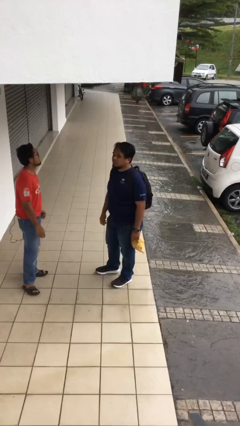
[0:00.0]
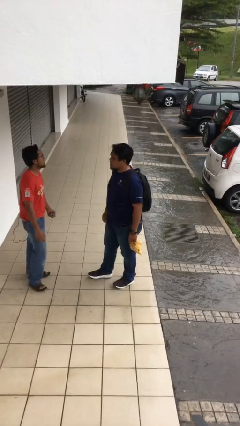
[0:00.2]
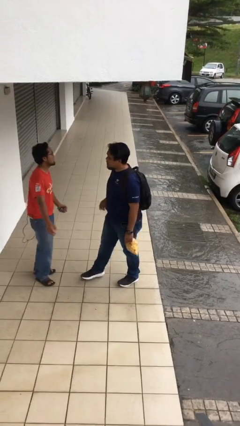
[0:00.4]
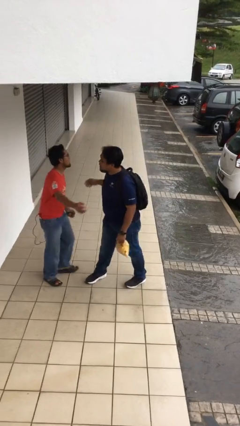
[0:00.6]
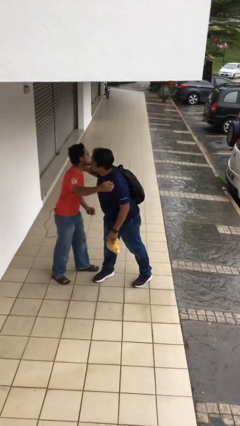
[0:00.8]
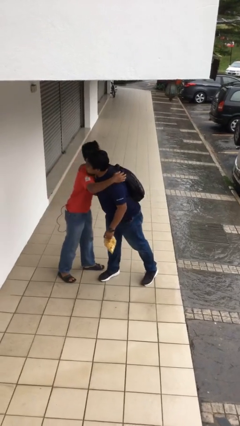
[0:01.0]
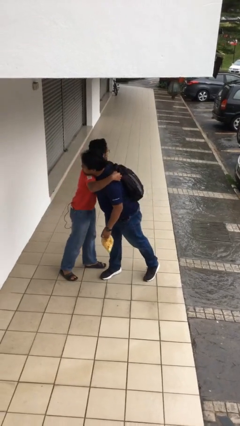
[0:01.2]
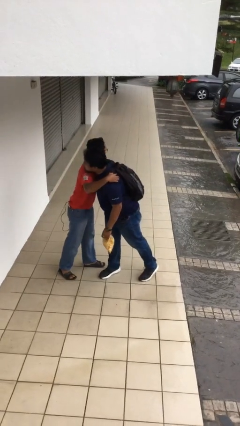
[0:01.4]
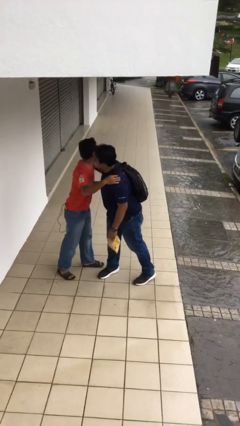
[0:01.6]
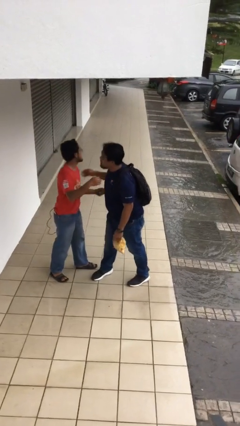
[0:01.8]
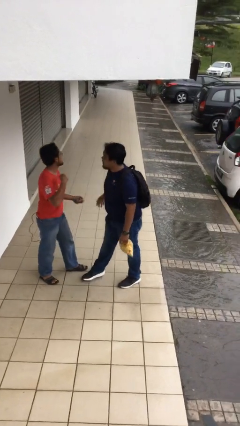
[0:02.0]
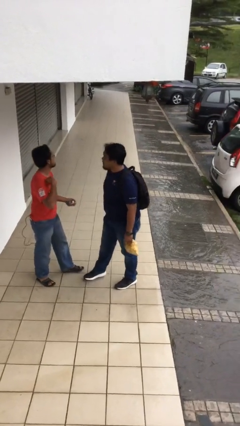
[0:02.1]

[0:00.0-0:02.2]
person embraces person

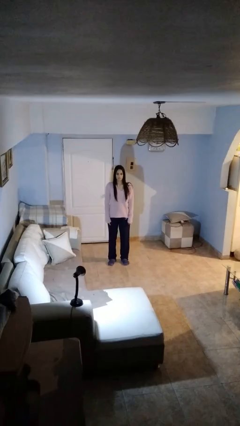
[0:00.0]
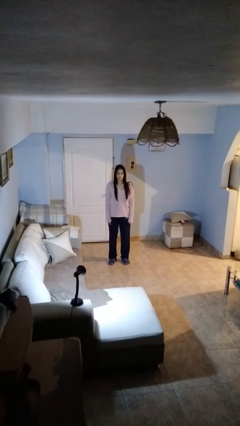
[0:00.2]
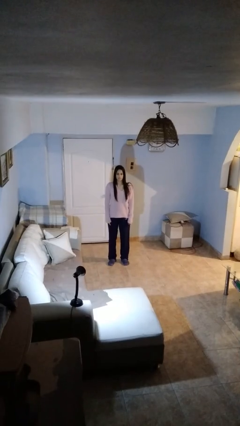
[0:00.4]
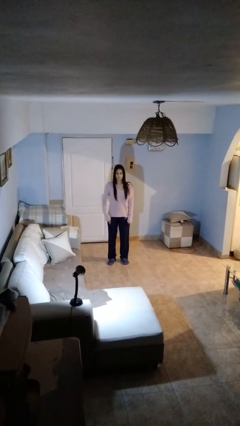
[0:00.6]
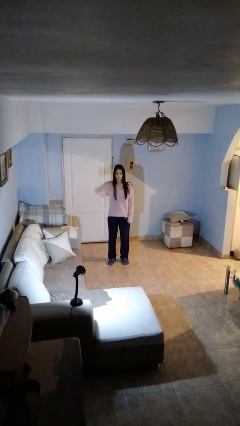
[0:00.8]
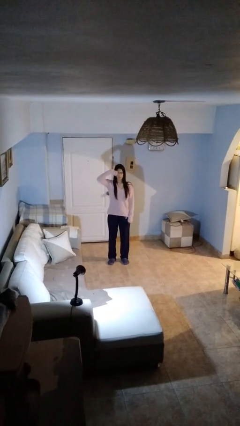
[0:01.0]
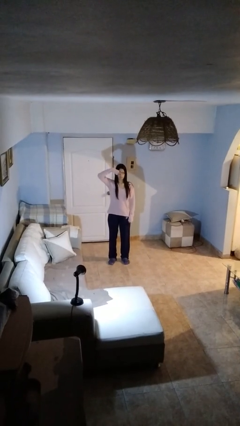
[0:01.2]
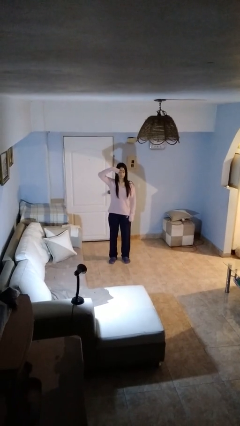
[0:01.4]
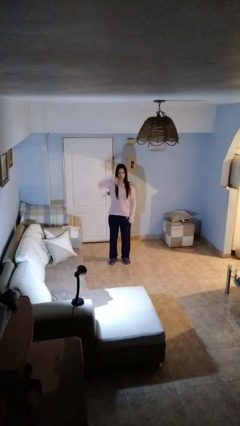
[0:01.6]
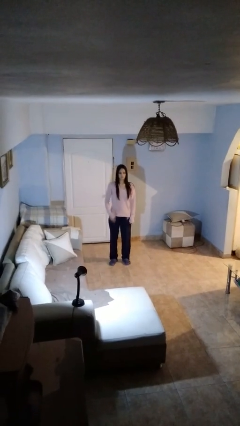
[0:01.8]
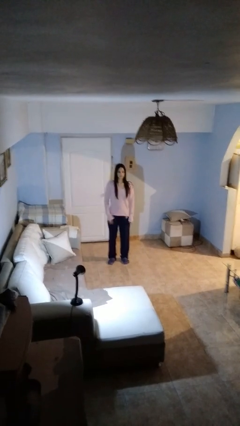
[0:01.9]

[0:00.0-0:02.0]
person salutes

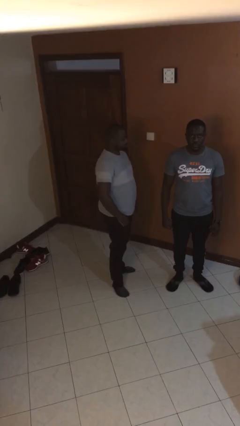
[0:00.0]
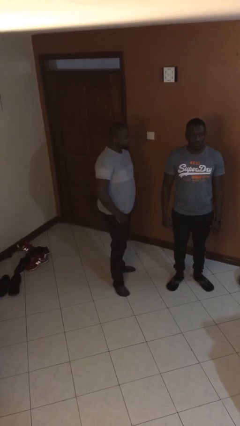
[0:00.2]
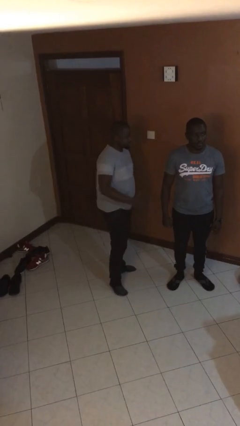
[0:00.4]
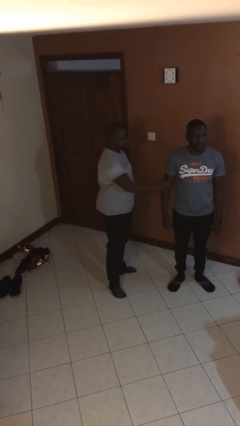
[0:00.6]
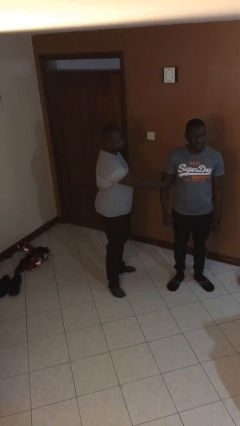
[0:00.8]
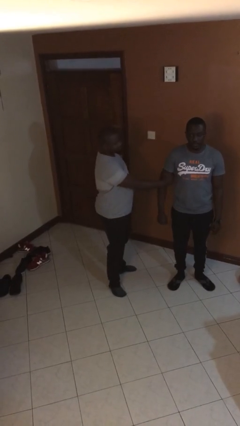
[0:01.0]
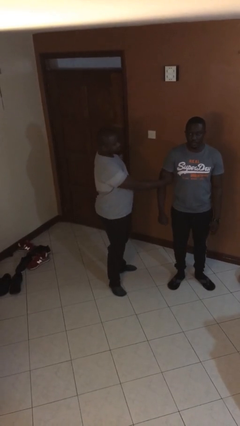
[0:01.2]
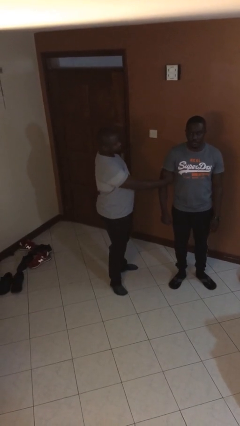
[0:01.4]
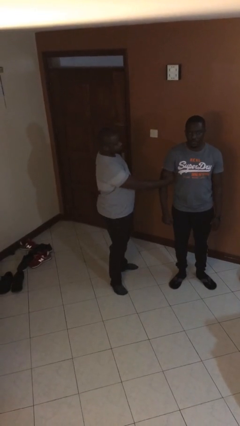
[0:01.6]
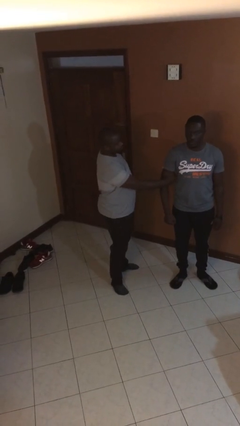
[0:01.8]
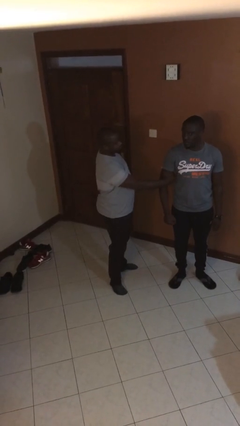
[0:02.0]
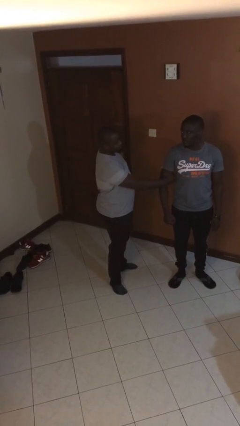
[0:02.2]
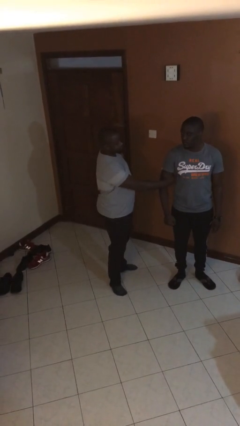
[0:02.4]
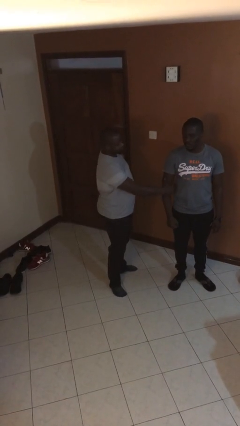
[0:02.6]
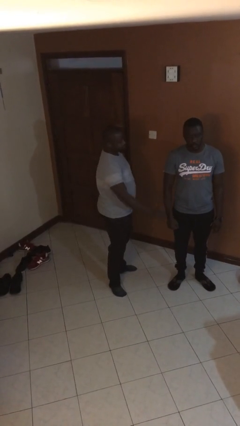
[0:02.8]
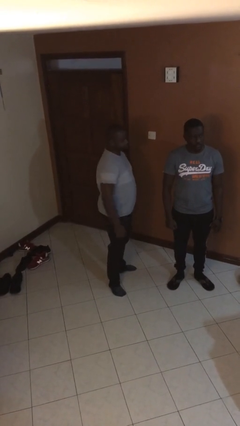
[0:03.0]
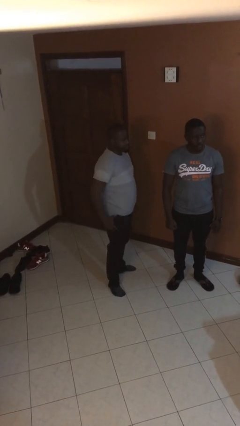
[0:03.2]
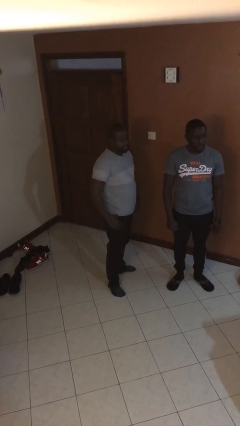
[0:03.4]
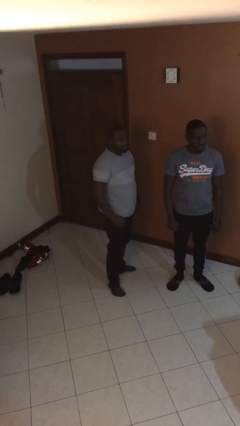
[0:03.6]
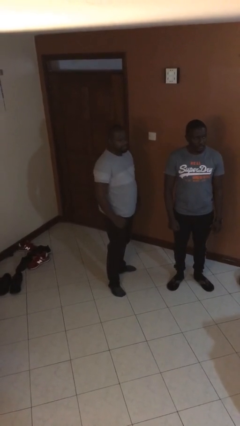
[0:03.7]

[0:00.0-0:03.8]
person grabs person by bicep

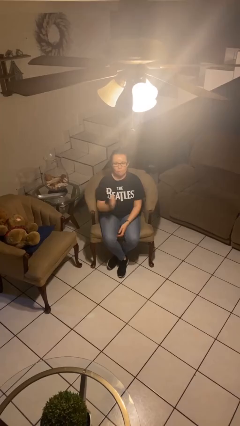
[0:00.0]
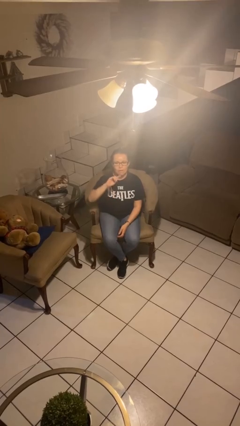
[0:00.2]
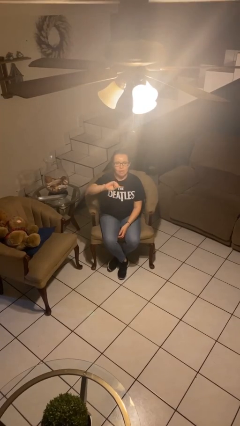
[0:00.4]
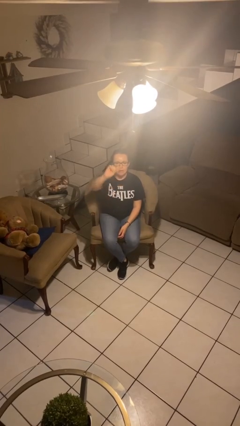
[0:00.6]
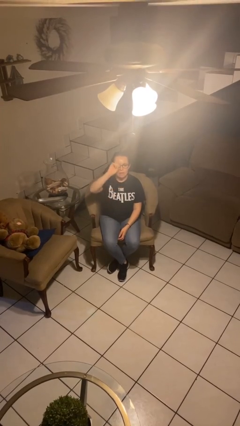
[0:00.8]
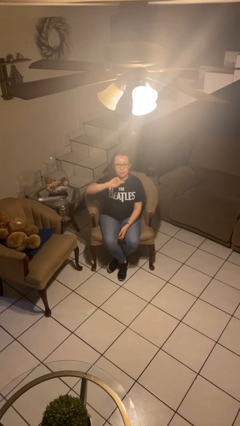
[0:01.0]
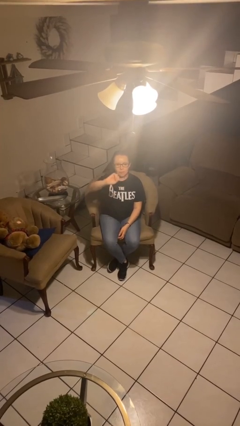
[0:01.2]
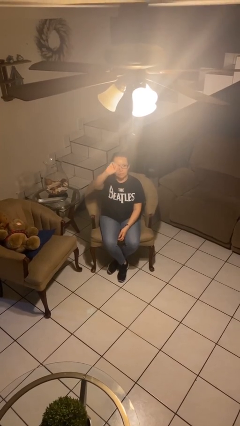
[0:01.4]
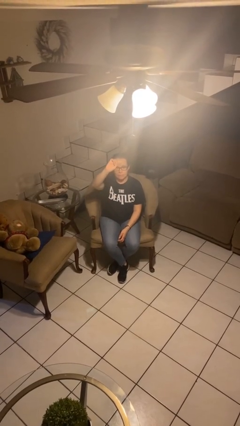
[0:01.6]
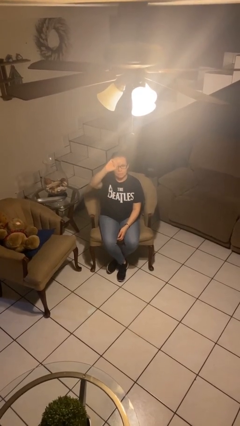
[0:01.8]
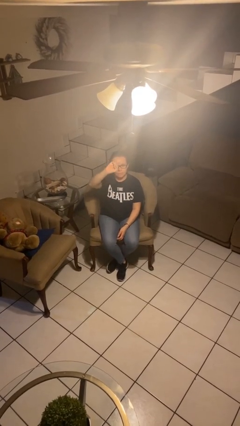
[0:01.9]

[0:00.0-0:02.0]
person gestures swipe up

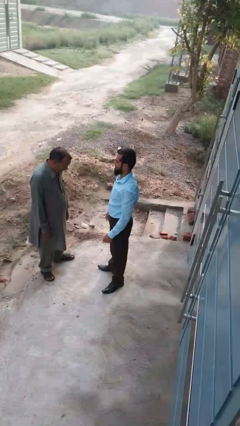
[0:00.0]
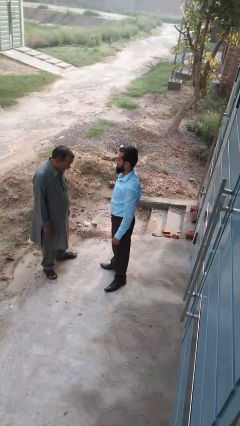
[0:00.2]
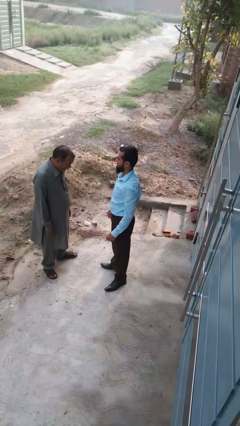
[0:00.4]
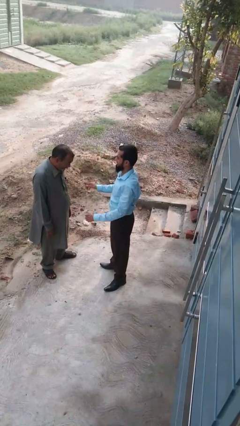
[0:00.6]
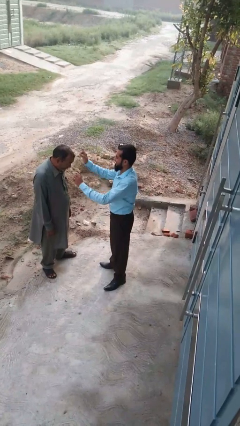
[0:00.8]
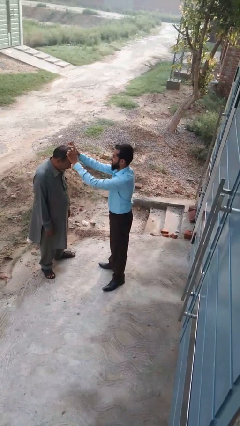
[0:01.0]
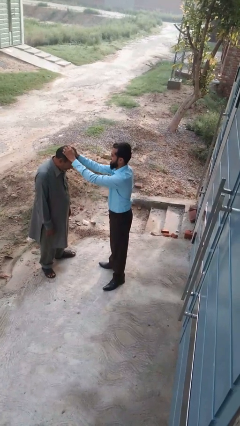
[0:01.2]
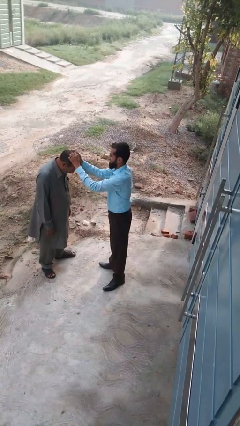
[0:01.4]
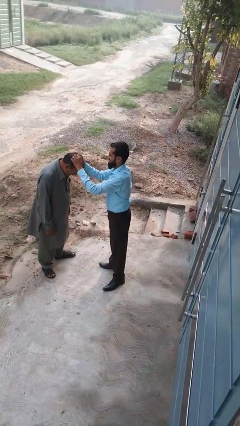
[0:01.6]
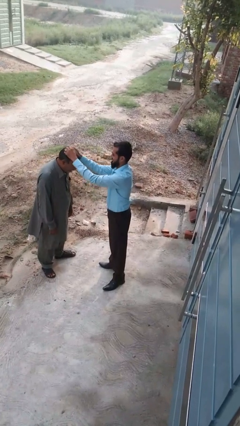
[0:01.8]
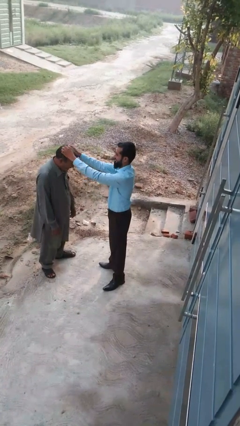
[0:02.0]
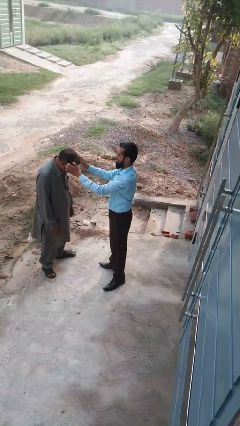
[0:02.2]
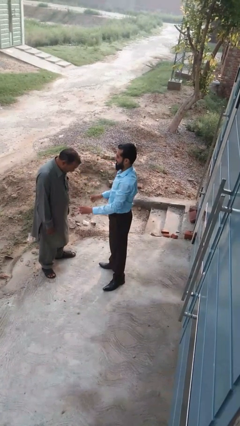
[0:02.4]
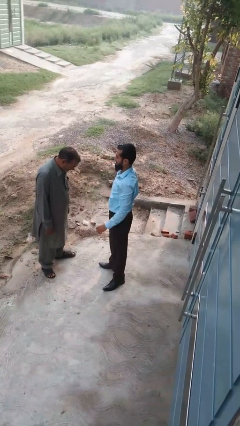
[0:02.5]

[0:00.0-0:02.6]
person grabs person by hair

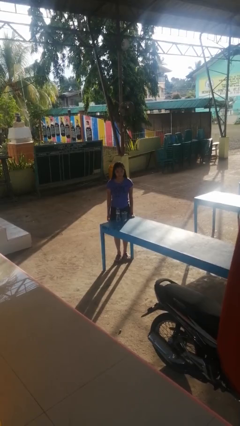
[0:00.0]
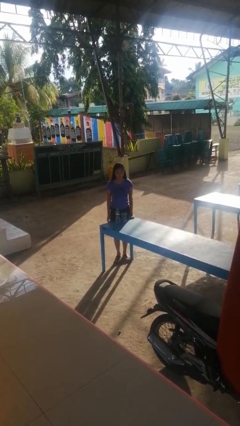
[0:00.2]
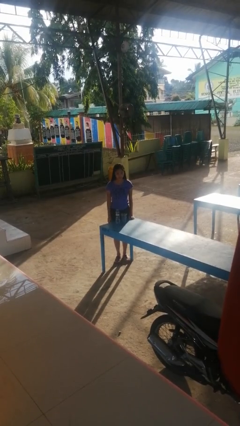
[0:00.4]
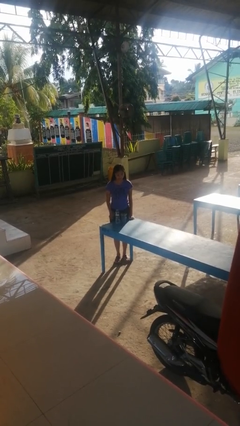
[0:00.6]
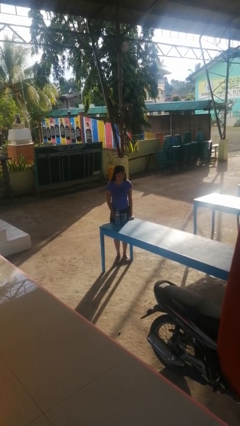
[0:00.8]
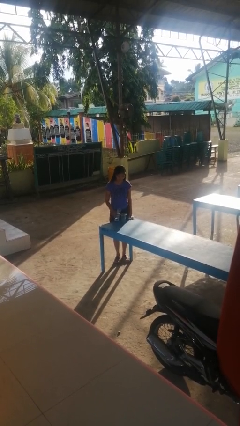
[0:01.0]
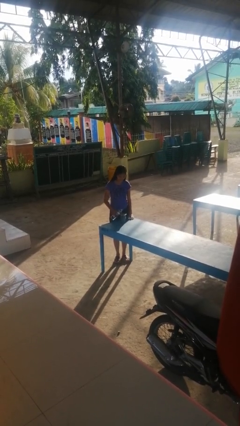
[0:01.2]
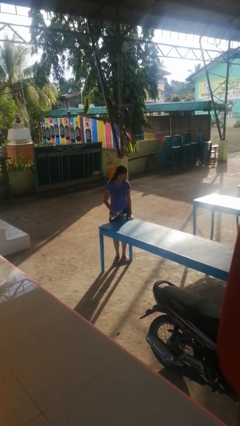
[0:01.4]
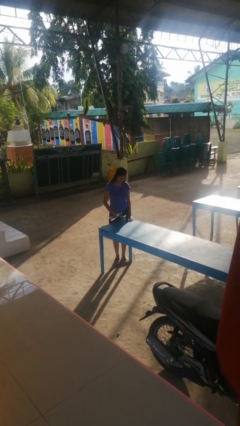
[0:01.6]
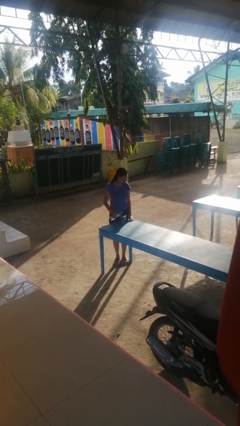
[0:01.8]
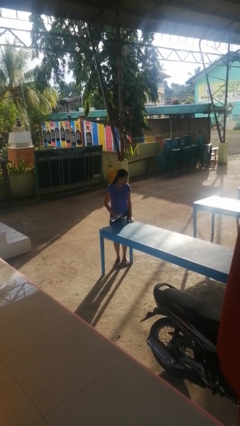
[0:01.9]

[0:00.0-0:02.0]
person pours liquid into cup

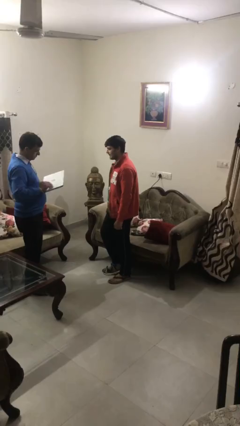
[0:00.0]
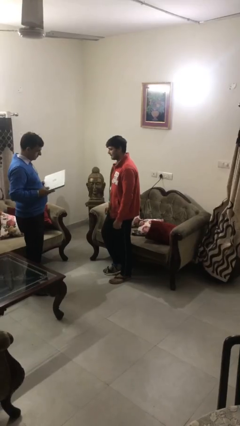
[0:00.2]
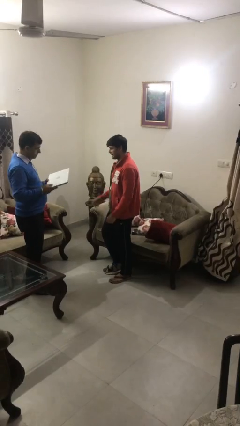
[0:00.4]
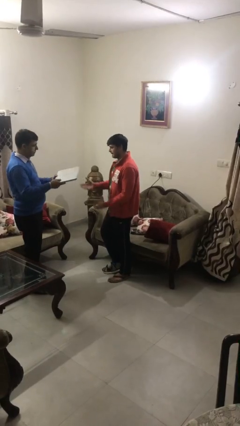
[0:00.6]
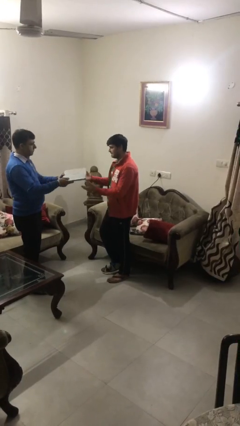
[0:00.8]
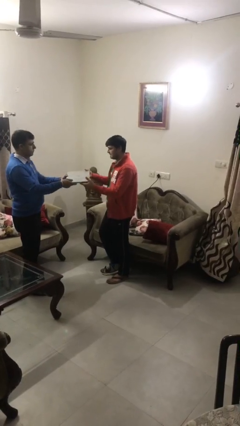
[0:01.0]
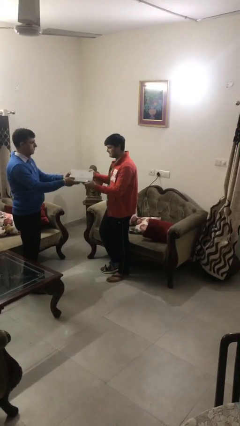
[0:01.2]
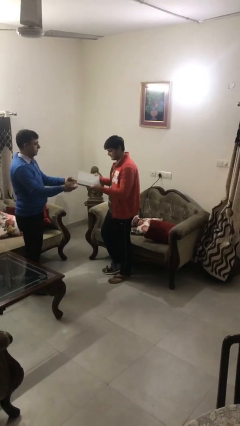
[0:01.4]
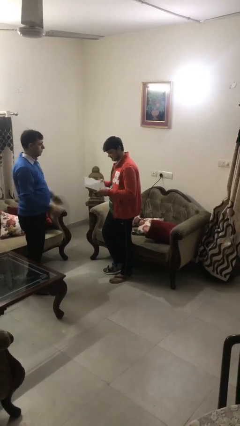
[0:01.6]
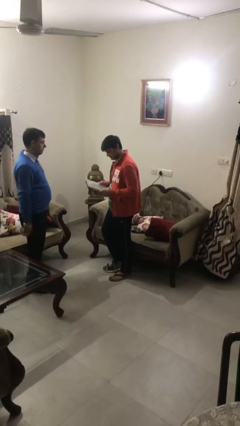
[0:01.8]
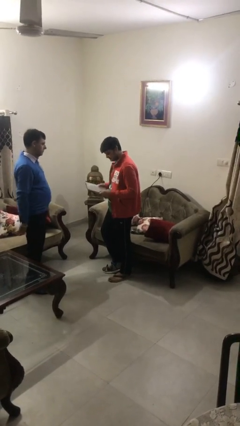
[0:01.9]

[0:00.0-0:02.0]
person transfers object to person
